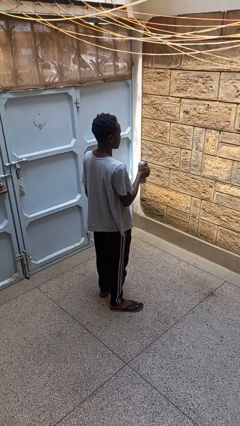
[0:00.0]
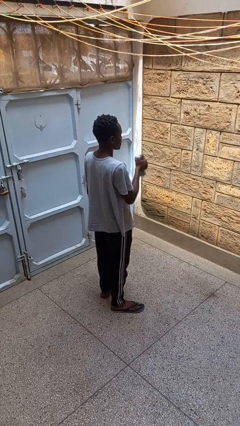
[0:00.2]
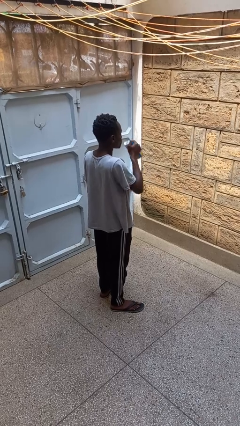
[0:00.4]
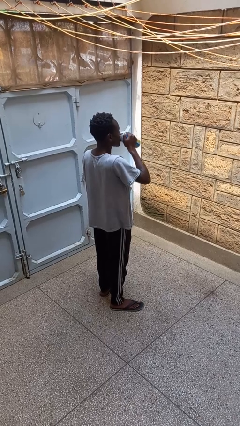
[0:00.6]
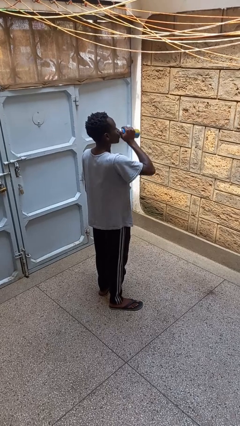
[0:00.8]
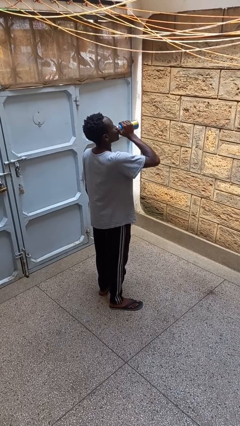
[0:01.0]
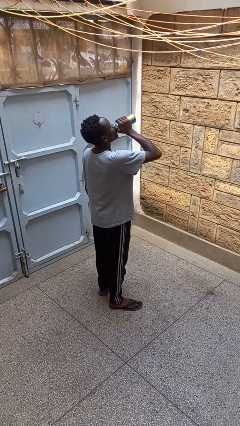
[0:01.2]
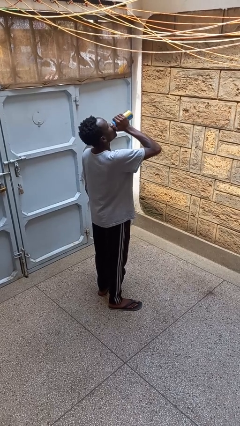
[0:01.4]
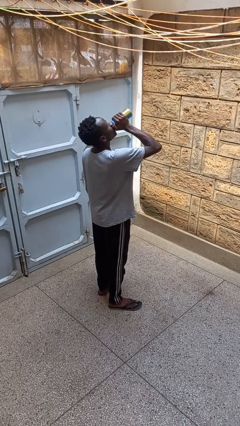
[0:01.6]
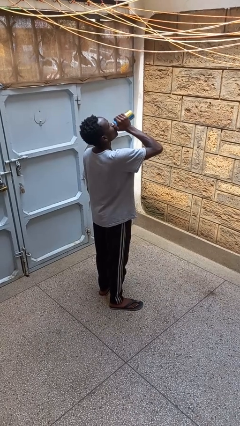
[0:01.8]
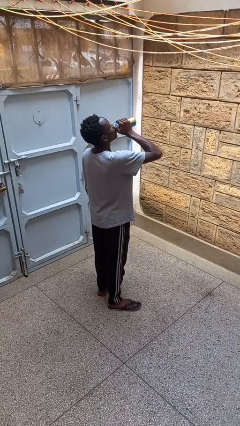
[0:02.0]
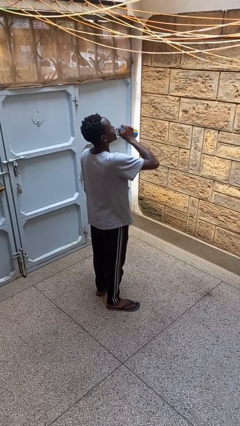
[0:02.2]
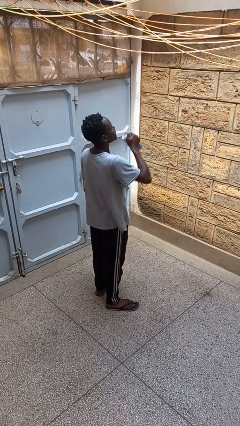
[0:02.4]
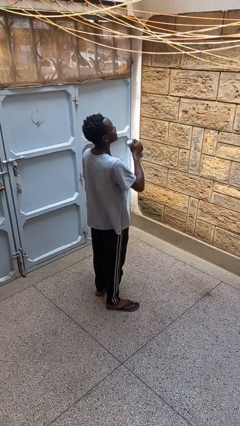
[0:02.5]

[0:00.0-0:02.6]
person drinks from beverage can

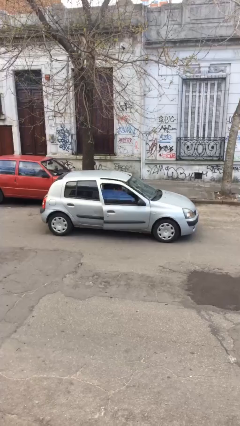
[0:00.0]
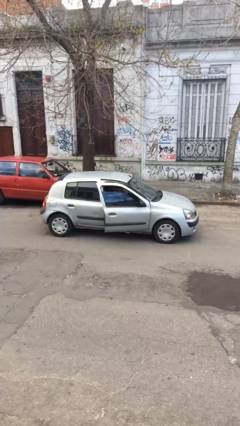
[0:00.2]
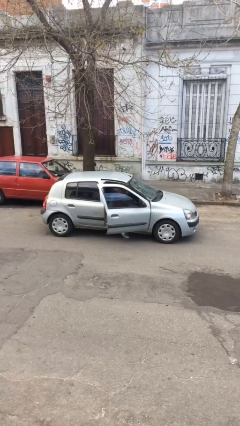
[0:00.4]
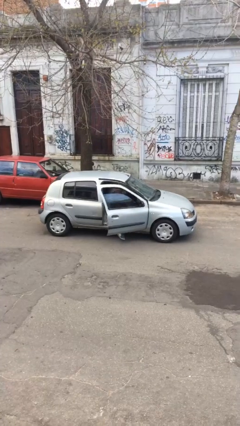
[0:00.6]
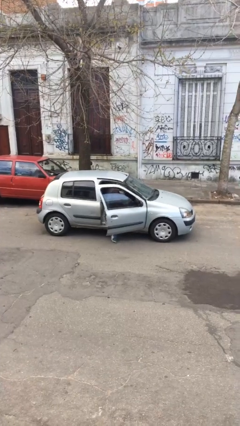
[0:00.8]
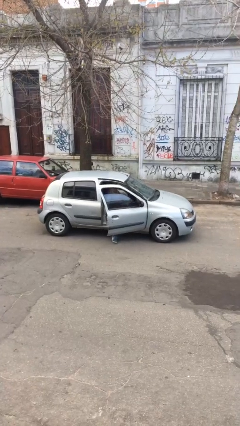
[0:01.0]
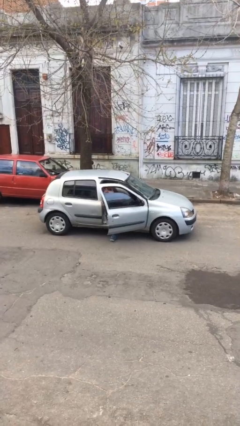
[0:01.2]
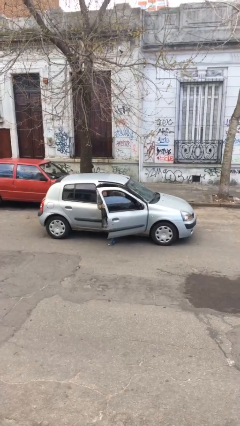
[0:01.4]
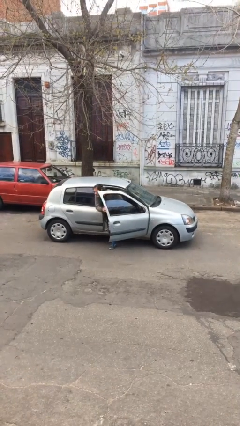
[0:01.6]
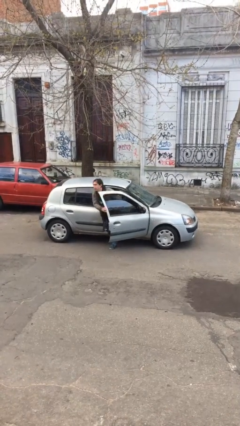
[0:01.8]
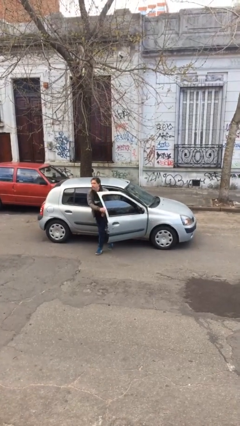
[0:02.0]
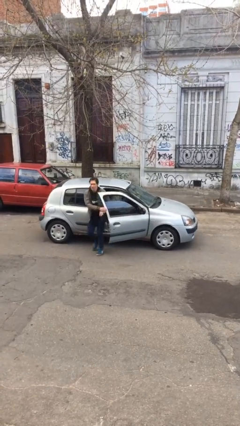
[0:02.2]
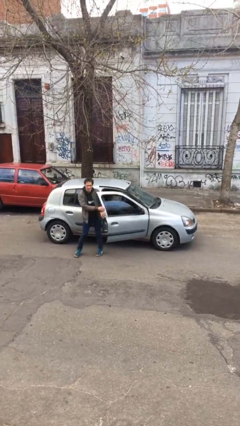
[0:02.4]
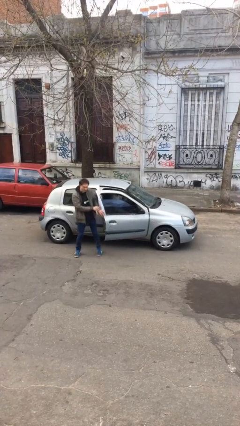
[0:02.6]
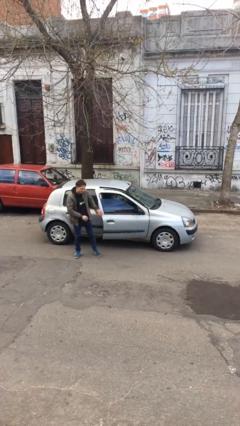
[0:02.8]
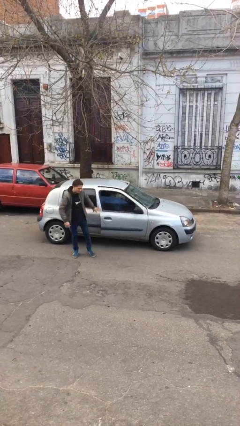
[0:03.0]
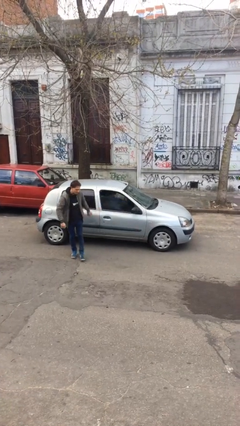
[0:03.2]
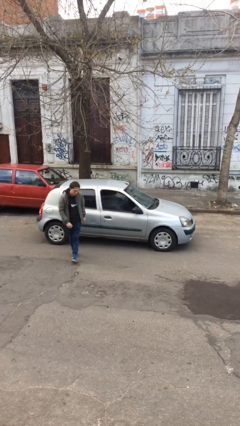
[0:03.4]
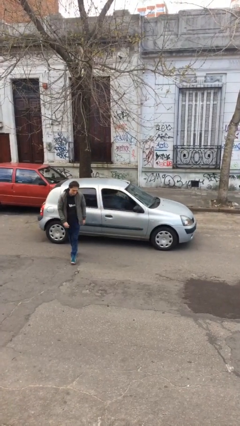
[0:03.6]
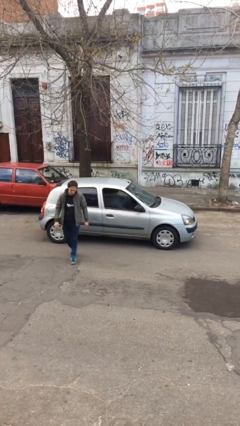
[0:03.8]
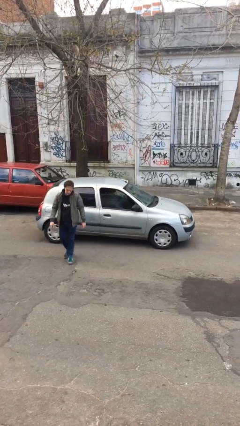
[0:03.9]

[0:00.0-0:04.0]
car drops off person

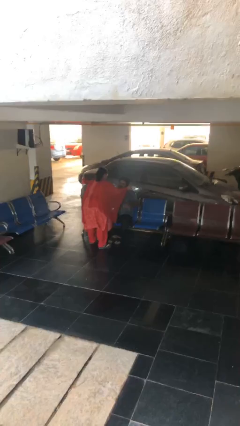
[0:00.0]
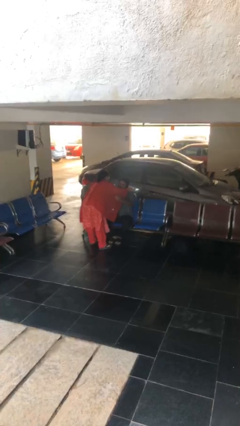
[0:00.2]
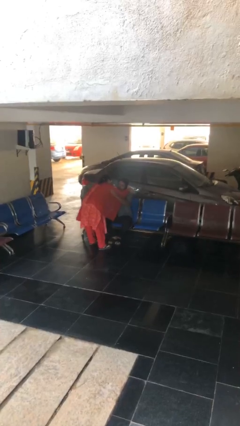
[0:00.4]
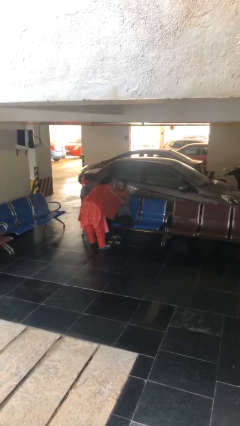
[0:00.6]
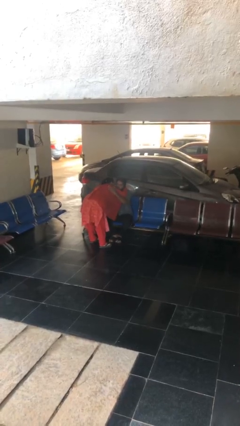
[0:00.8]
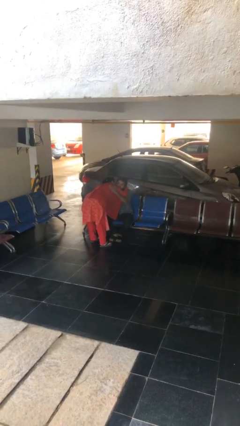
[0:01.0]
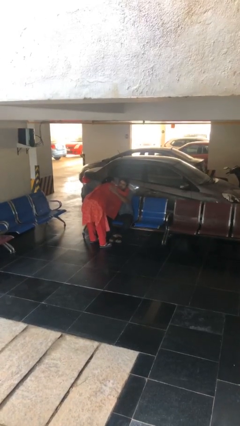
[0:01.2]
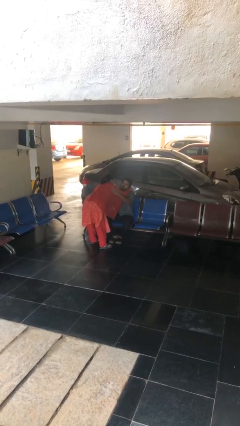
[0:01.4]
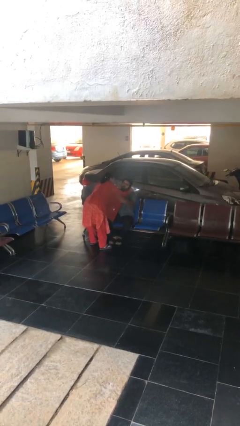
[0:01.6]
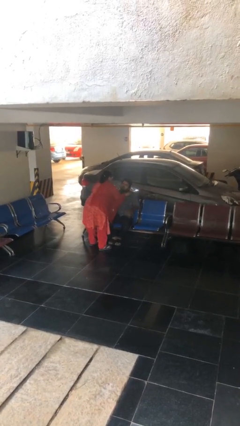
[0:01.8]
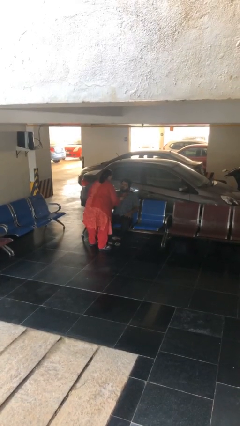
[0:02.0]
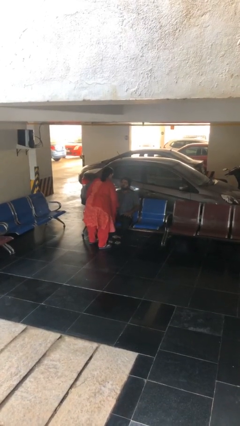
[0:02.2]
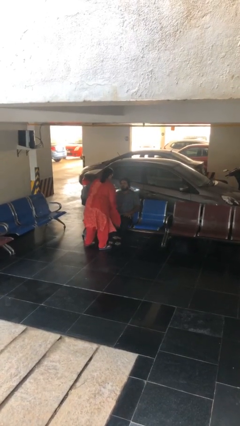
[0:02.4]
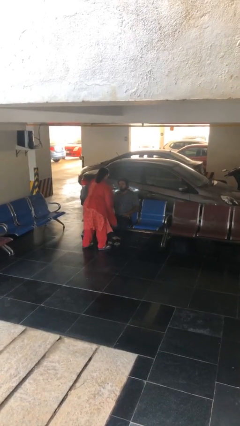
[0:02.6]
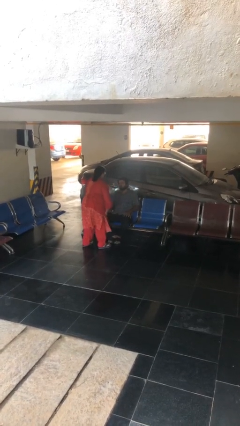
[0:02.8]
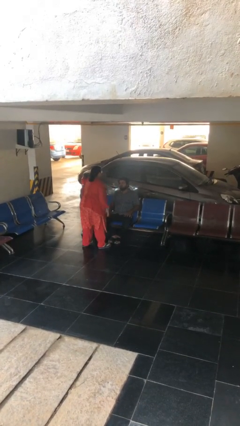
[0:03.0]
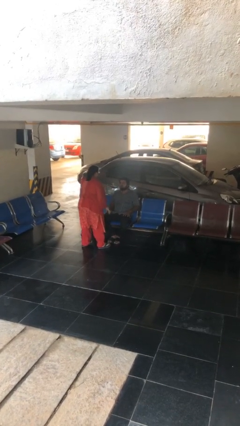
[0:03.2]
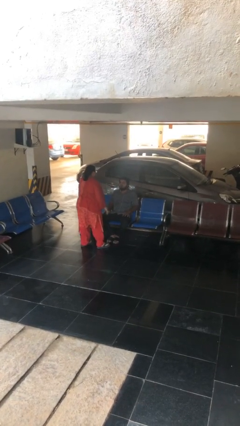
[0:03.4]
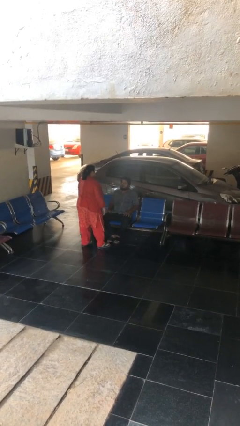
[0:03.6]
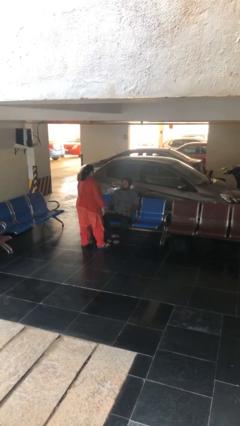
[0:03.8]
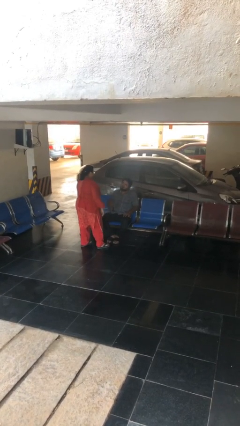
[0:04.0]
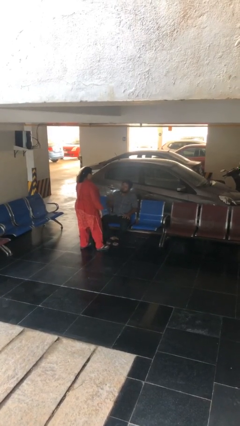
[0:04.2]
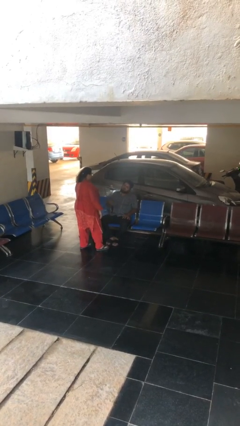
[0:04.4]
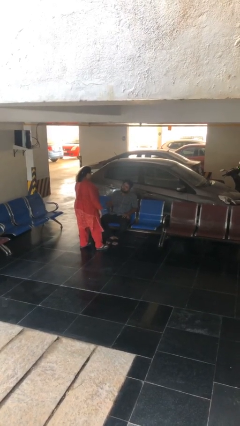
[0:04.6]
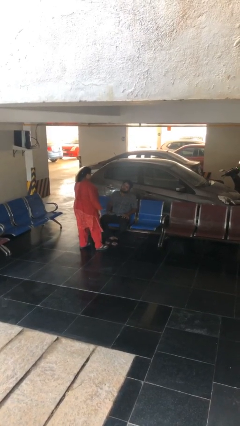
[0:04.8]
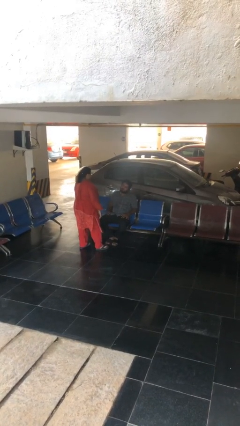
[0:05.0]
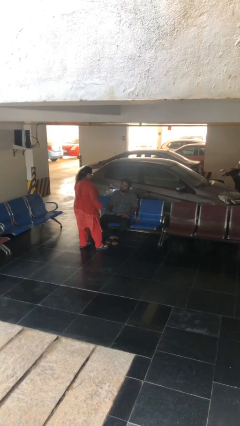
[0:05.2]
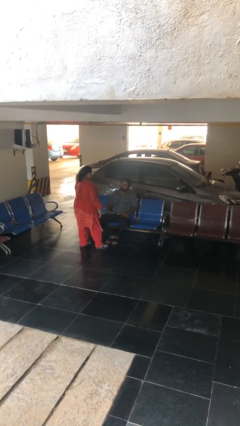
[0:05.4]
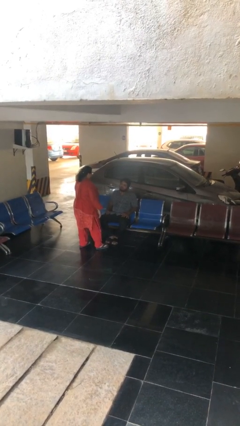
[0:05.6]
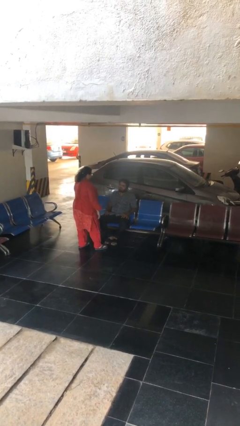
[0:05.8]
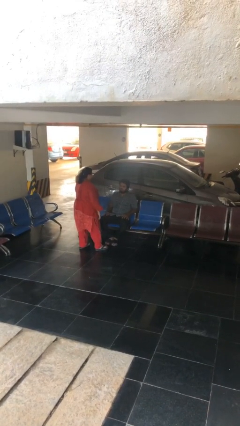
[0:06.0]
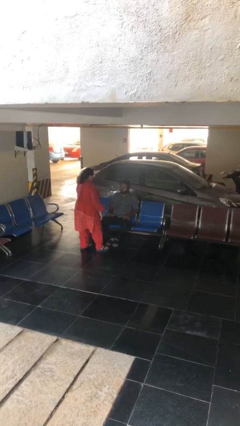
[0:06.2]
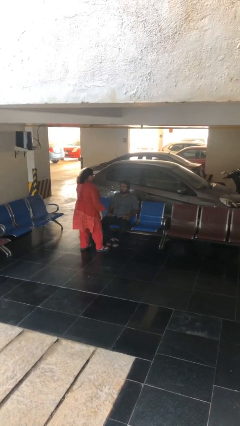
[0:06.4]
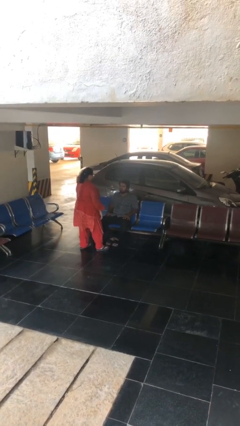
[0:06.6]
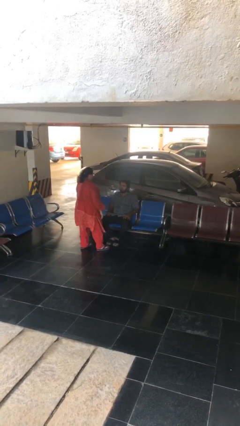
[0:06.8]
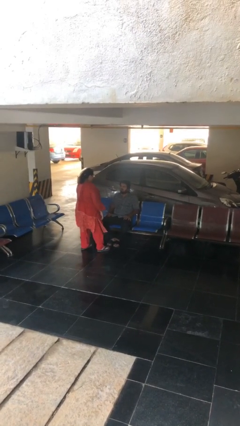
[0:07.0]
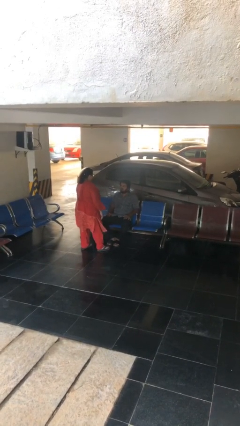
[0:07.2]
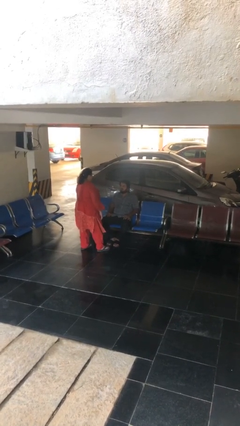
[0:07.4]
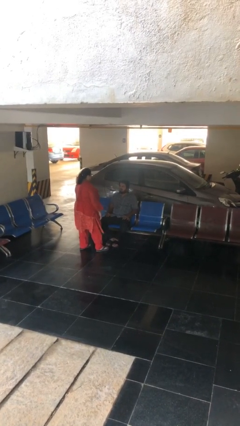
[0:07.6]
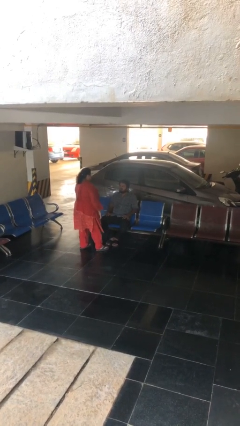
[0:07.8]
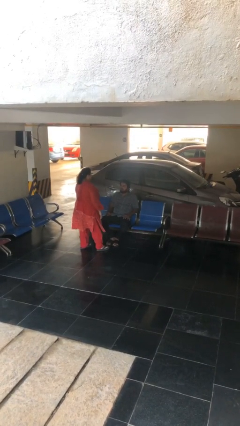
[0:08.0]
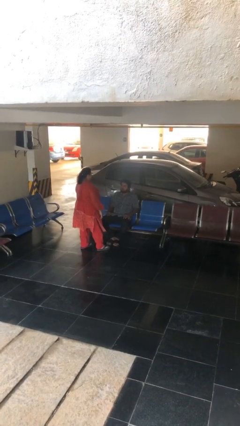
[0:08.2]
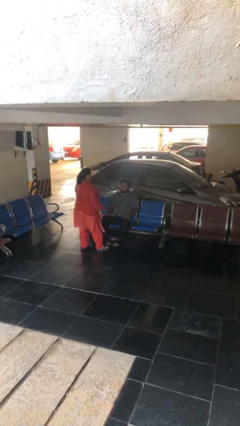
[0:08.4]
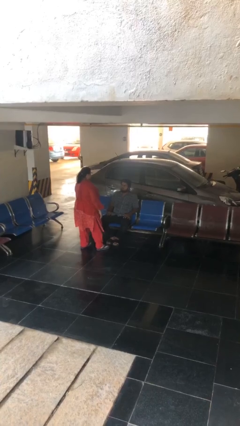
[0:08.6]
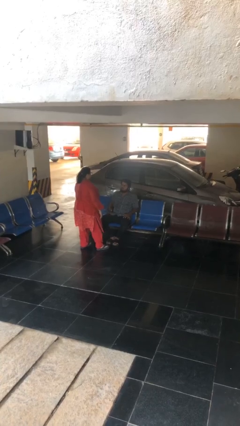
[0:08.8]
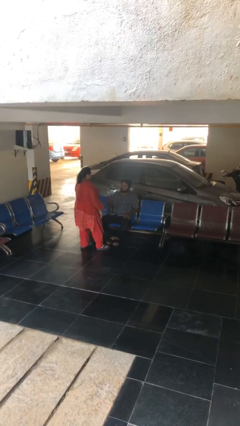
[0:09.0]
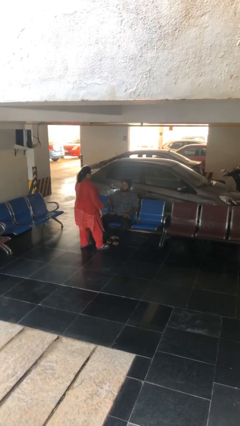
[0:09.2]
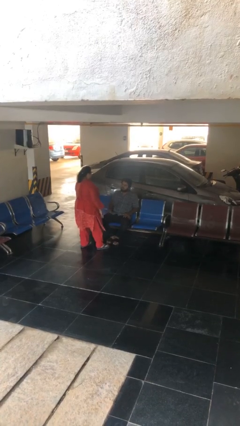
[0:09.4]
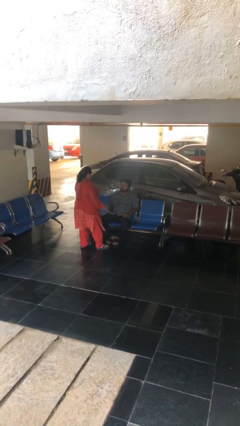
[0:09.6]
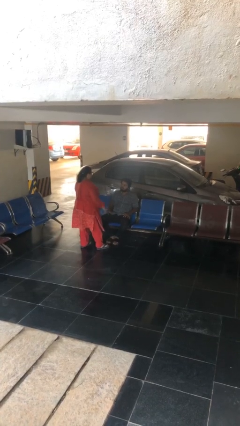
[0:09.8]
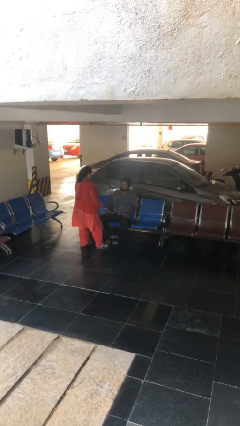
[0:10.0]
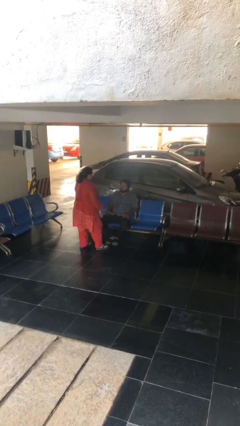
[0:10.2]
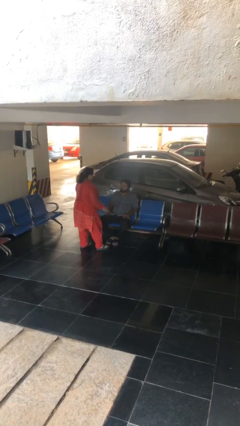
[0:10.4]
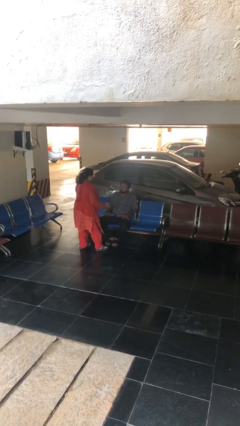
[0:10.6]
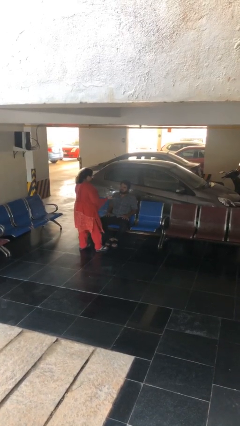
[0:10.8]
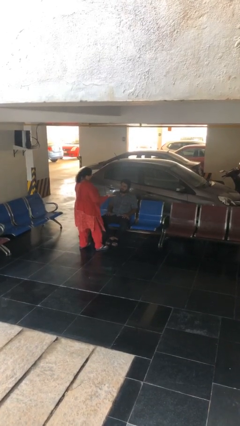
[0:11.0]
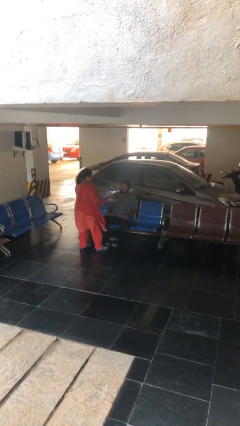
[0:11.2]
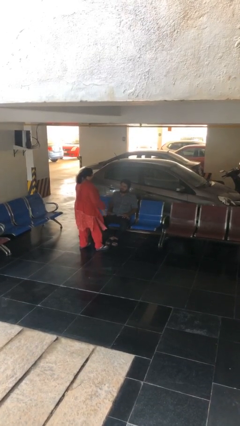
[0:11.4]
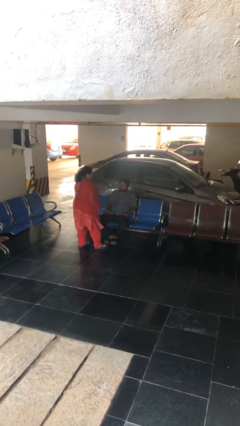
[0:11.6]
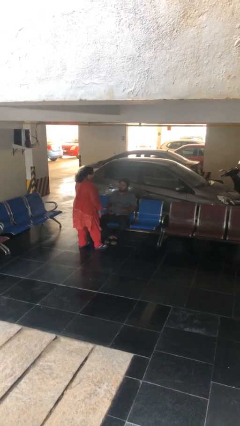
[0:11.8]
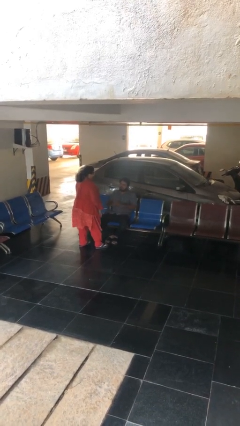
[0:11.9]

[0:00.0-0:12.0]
person embraces person
